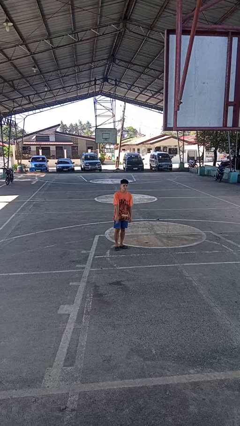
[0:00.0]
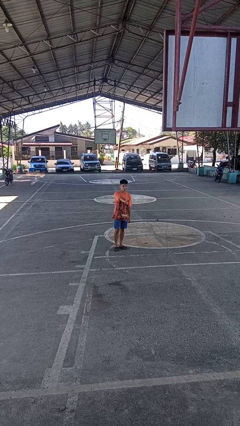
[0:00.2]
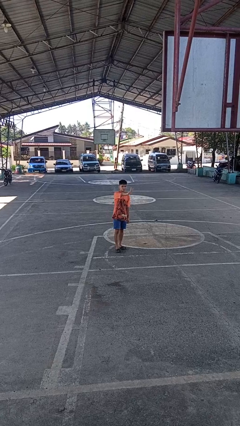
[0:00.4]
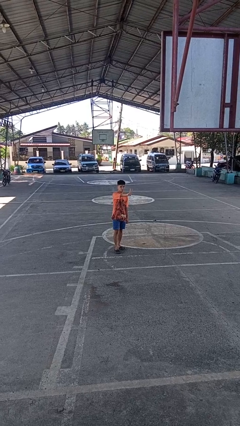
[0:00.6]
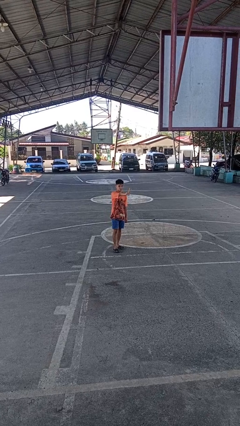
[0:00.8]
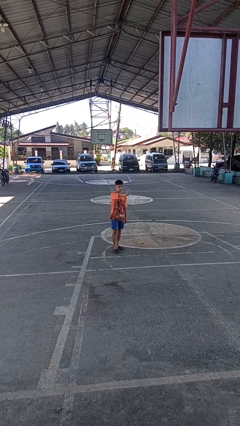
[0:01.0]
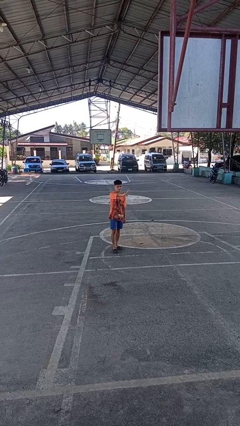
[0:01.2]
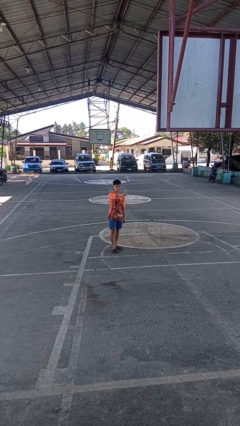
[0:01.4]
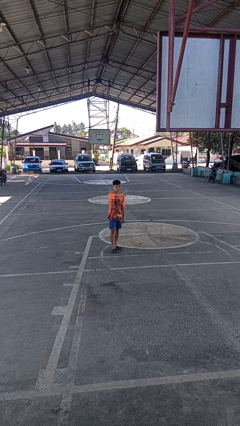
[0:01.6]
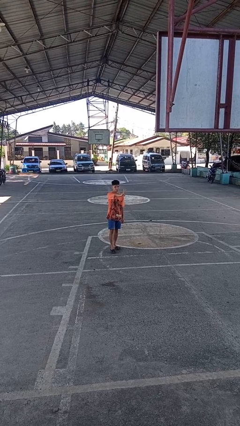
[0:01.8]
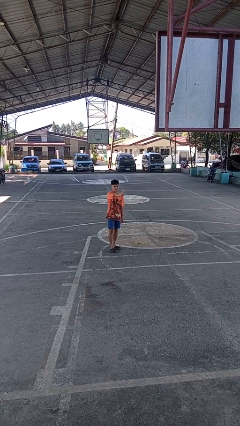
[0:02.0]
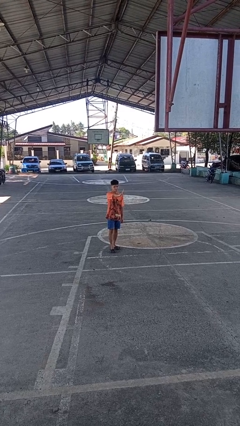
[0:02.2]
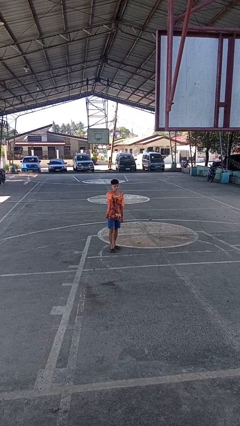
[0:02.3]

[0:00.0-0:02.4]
person gestures peace

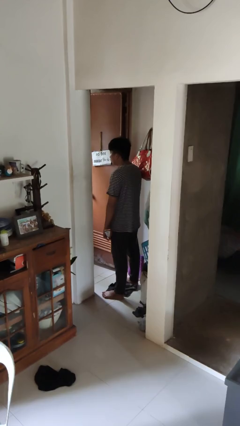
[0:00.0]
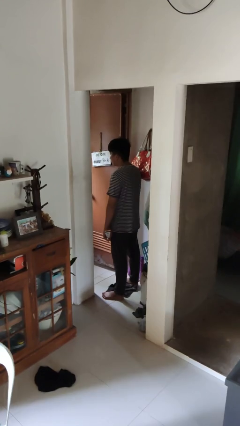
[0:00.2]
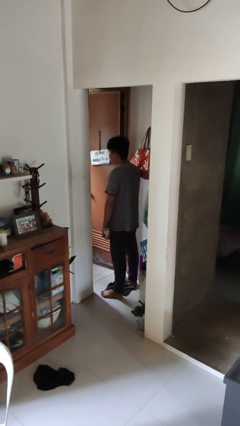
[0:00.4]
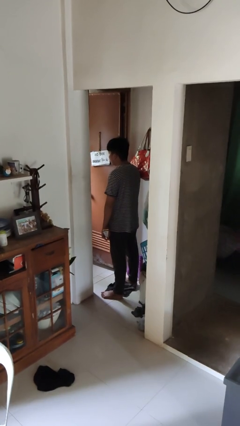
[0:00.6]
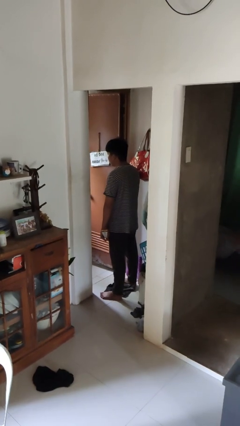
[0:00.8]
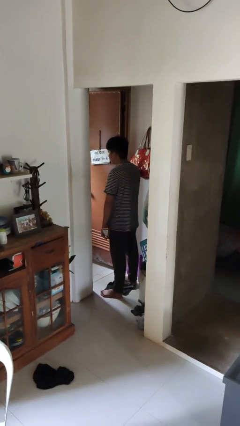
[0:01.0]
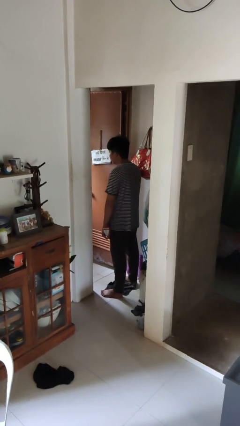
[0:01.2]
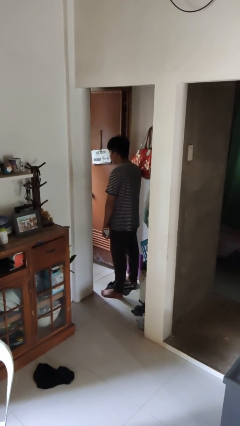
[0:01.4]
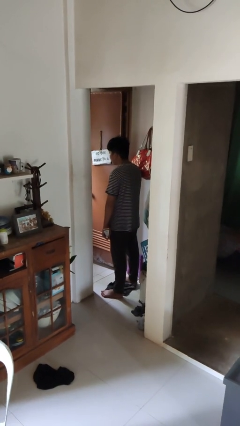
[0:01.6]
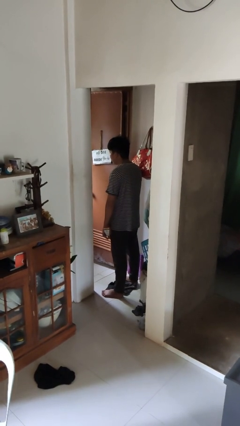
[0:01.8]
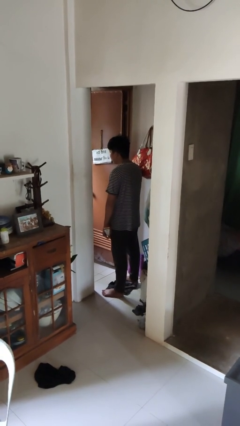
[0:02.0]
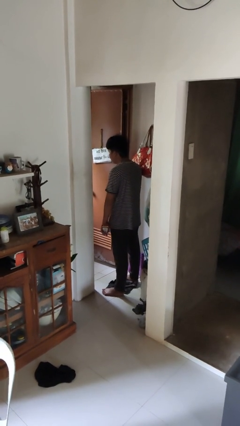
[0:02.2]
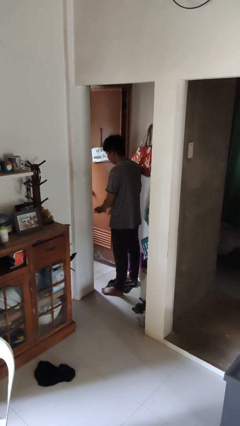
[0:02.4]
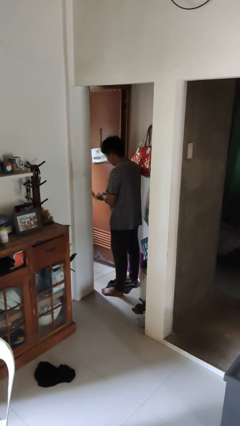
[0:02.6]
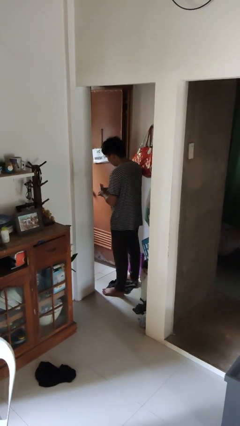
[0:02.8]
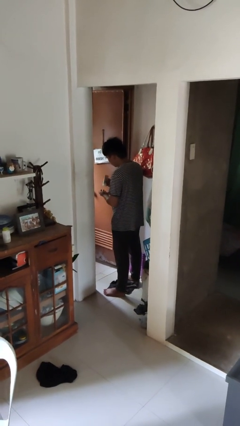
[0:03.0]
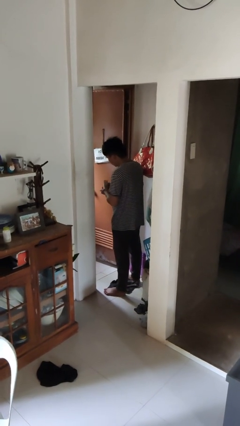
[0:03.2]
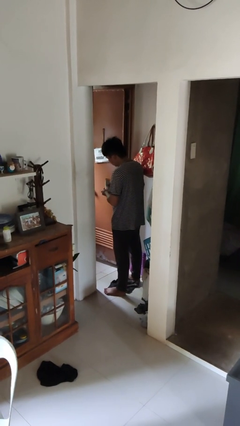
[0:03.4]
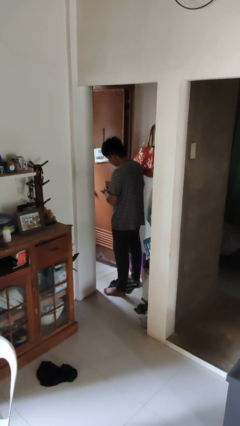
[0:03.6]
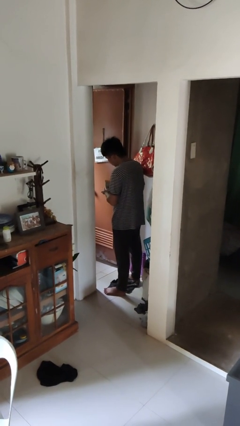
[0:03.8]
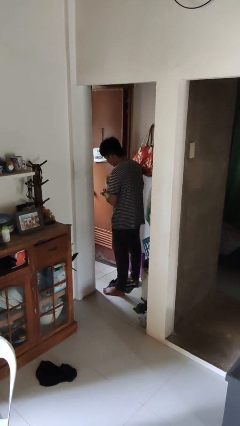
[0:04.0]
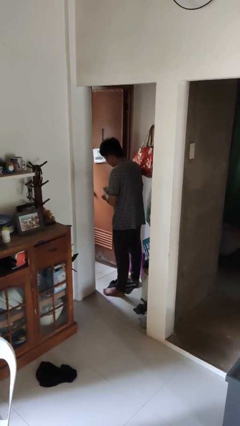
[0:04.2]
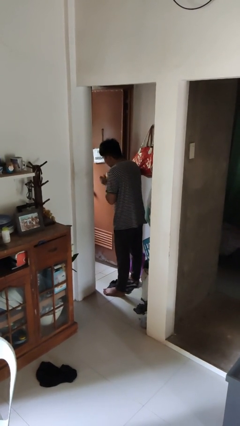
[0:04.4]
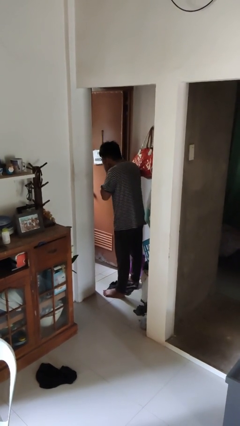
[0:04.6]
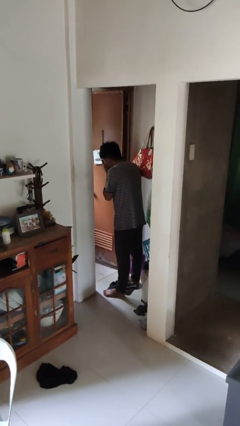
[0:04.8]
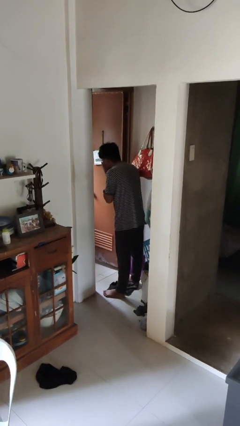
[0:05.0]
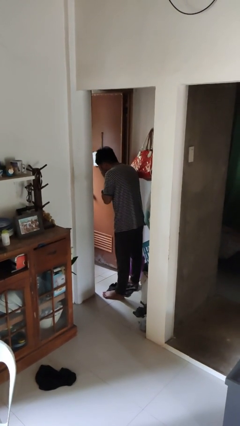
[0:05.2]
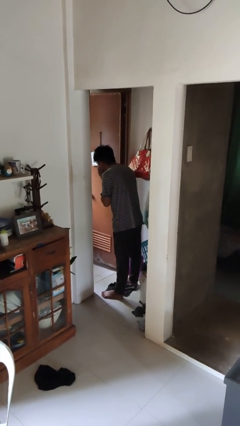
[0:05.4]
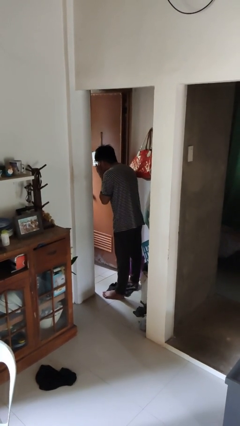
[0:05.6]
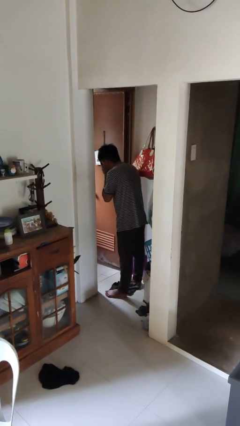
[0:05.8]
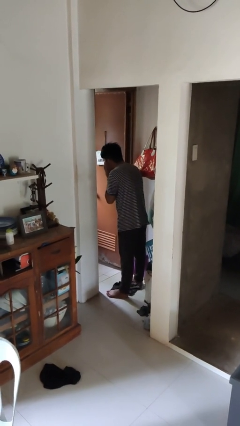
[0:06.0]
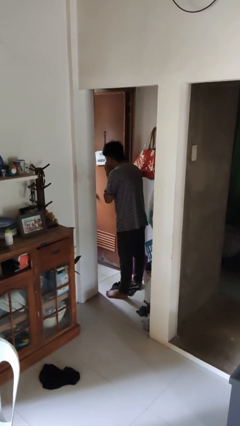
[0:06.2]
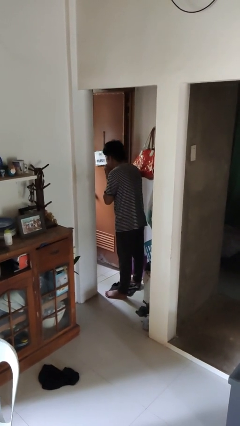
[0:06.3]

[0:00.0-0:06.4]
person applies facial moisturizer

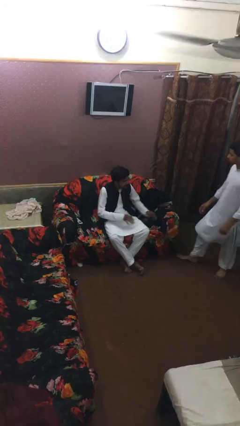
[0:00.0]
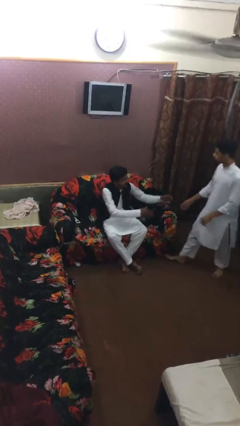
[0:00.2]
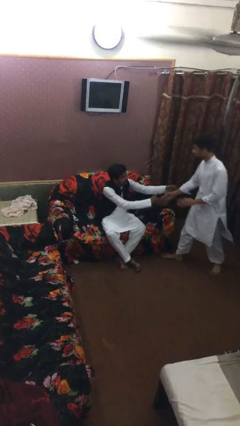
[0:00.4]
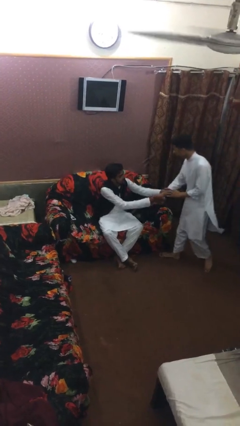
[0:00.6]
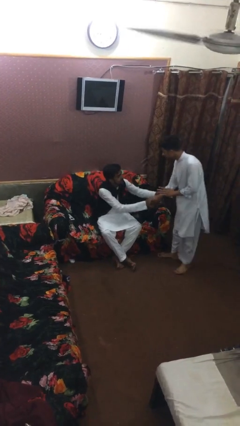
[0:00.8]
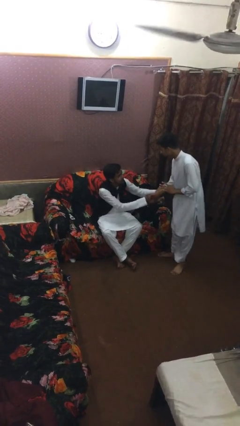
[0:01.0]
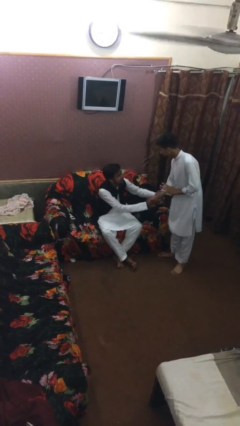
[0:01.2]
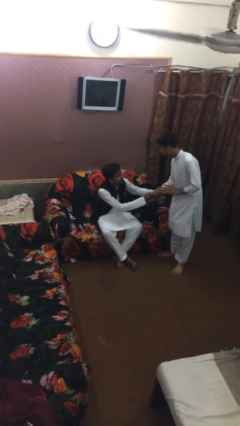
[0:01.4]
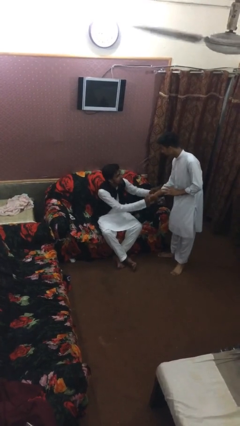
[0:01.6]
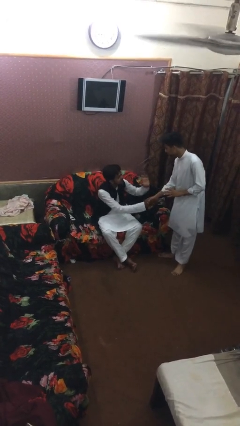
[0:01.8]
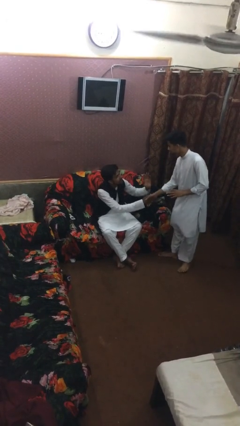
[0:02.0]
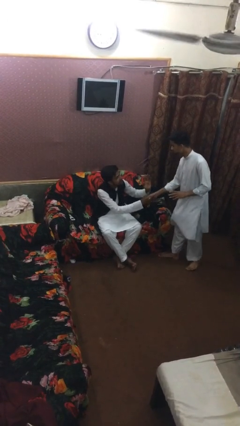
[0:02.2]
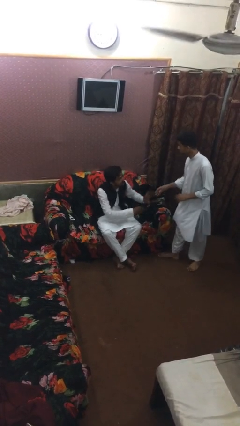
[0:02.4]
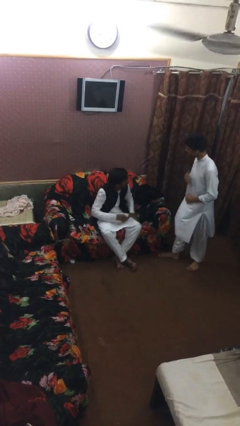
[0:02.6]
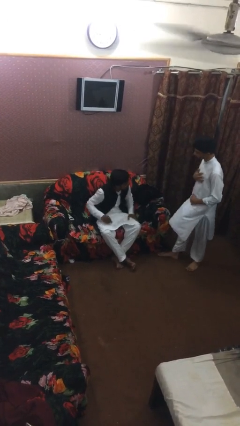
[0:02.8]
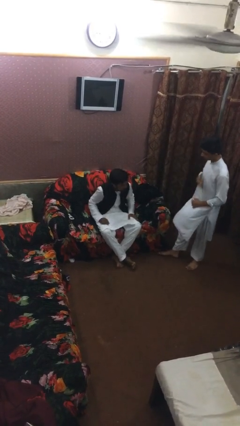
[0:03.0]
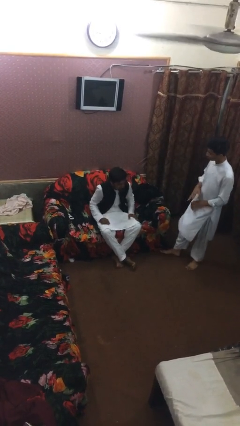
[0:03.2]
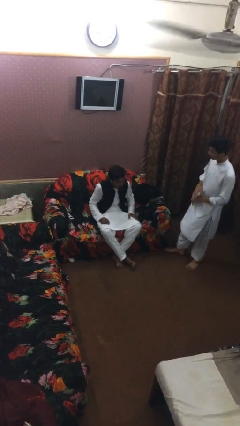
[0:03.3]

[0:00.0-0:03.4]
person shakes hand

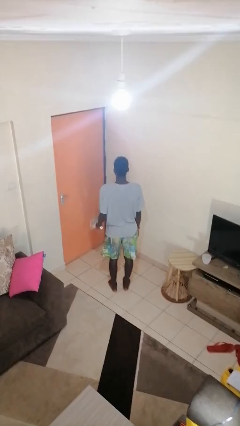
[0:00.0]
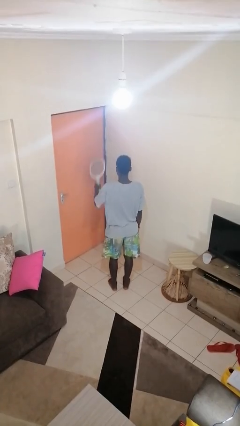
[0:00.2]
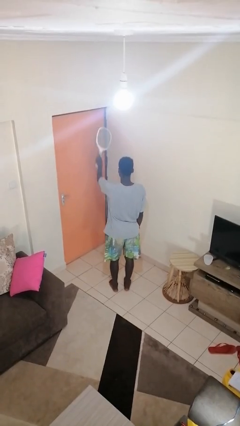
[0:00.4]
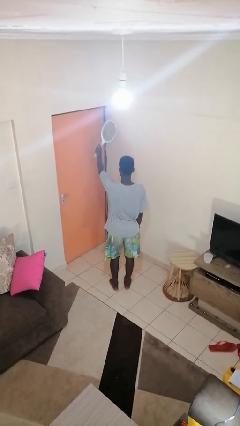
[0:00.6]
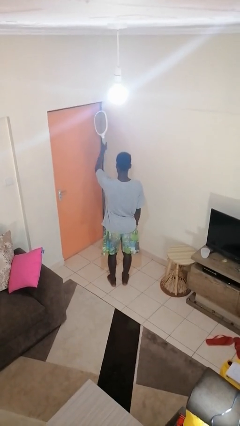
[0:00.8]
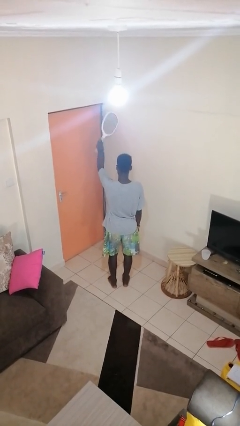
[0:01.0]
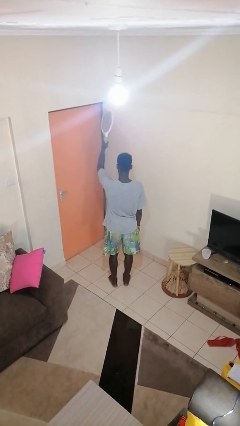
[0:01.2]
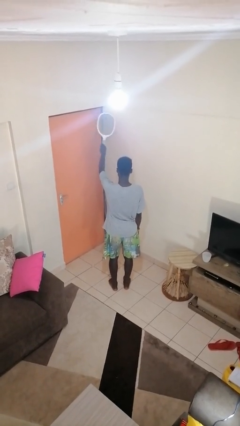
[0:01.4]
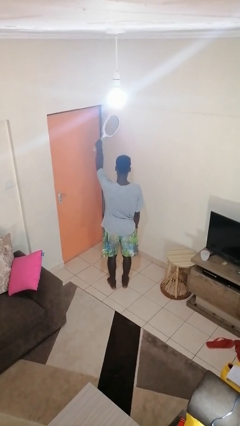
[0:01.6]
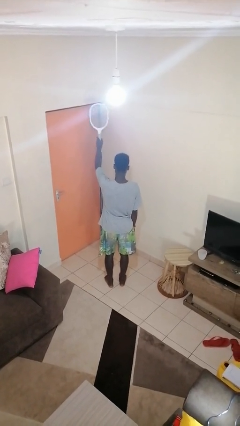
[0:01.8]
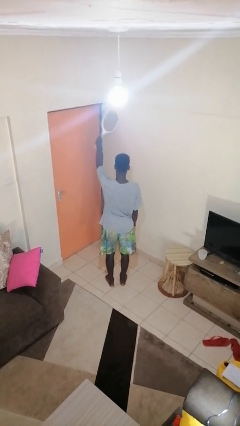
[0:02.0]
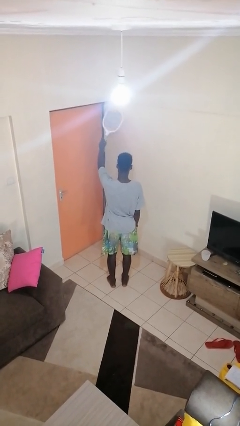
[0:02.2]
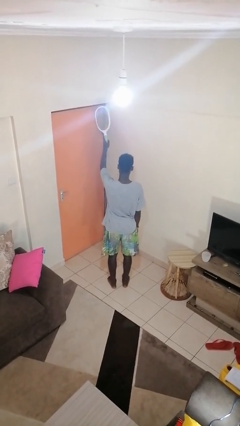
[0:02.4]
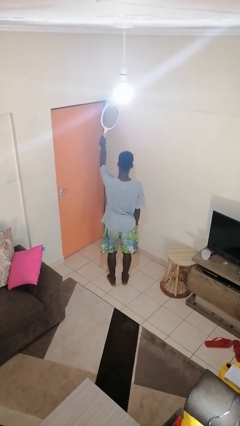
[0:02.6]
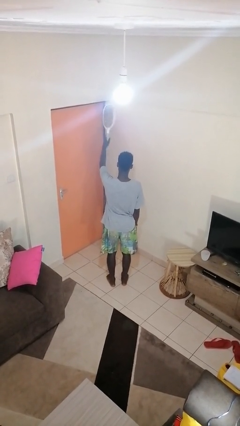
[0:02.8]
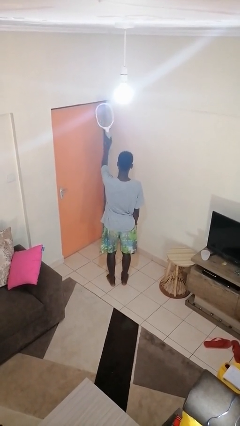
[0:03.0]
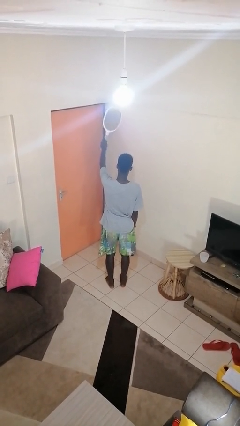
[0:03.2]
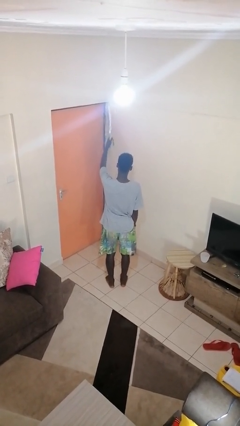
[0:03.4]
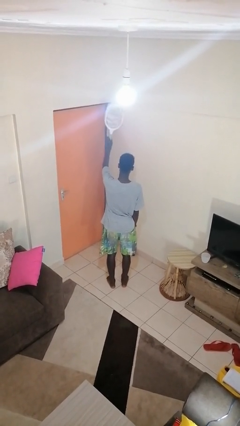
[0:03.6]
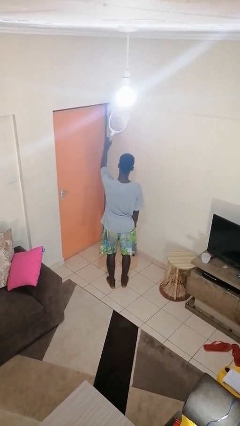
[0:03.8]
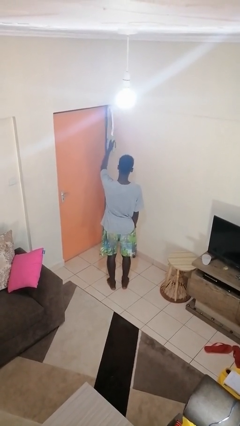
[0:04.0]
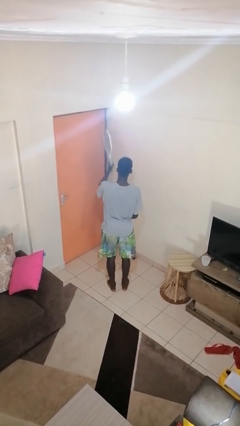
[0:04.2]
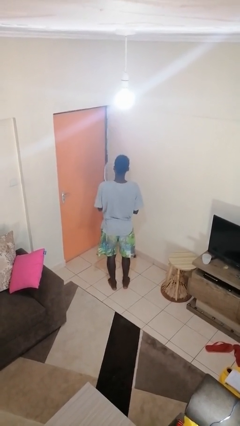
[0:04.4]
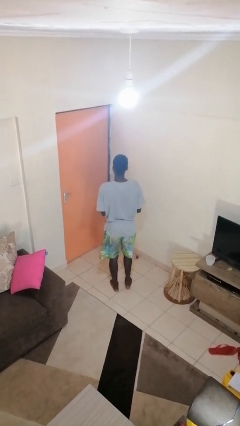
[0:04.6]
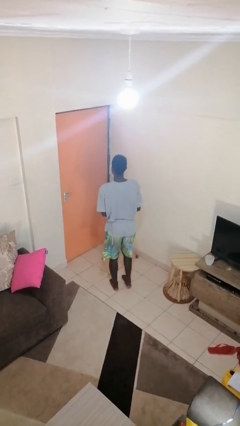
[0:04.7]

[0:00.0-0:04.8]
person holds object above head

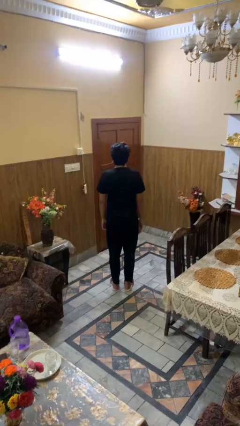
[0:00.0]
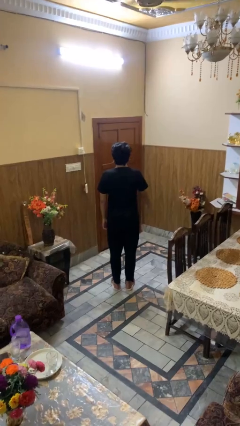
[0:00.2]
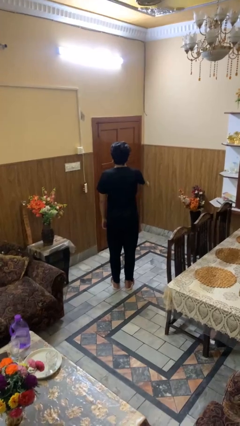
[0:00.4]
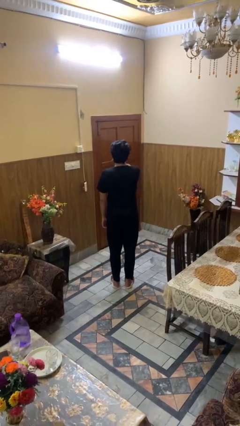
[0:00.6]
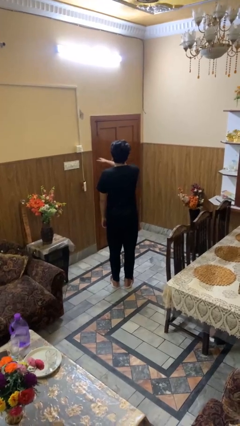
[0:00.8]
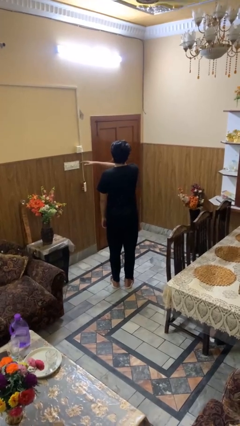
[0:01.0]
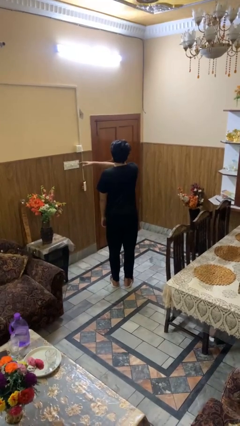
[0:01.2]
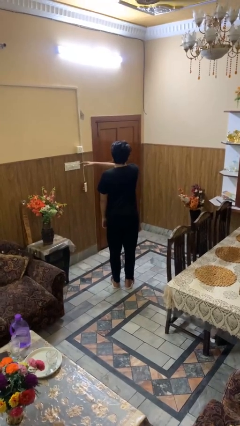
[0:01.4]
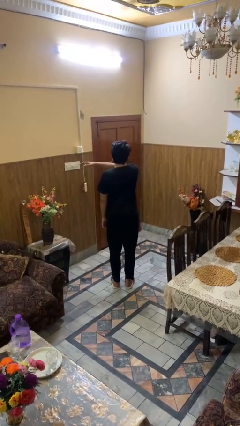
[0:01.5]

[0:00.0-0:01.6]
person gestures swipe left
